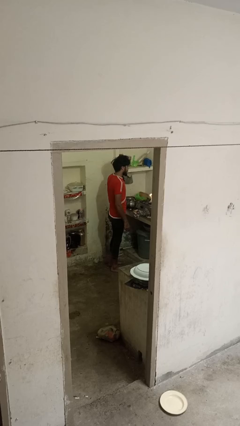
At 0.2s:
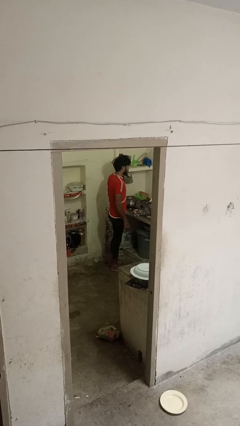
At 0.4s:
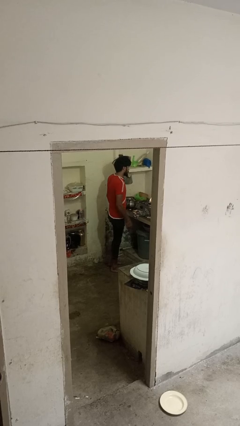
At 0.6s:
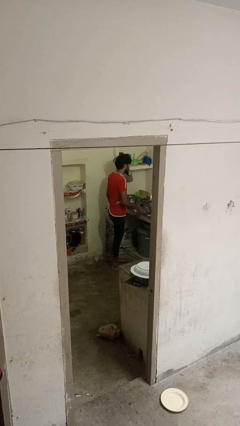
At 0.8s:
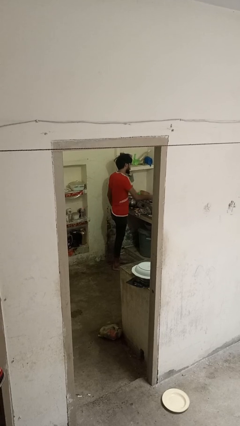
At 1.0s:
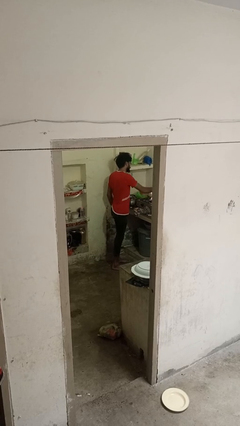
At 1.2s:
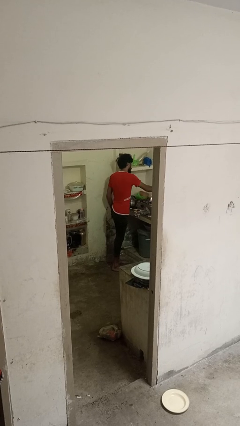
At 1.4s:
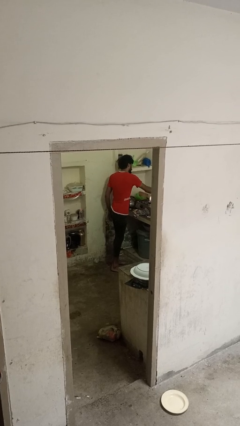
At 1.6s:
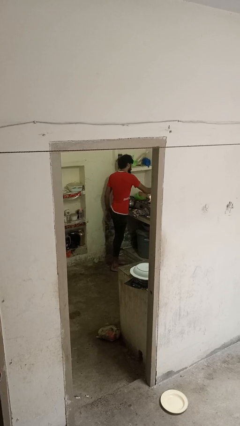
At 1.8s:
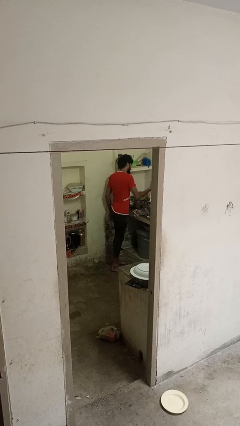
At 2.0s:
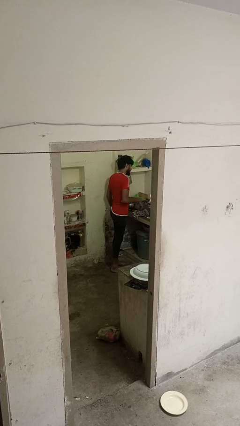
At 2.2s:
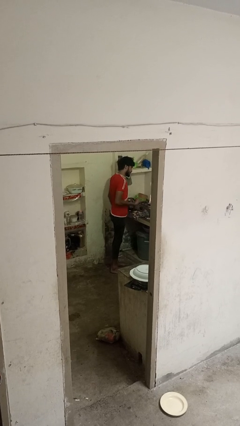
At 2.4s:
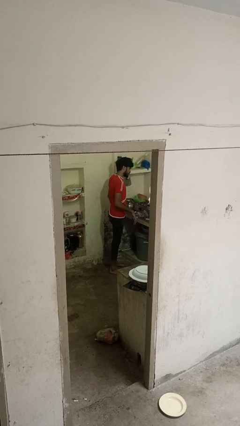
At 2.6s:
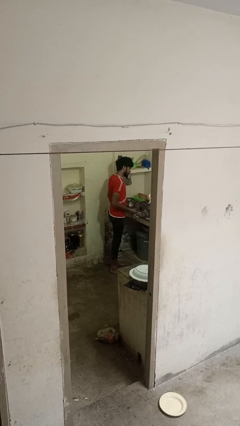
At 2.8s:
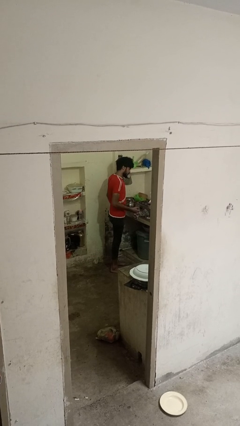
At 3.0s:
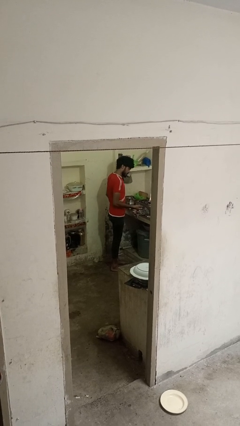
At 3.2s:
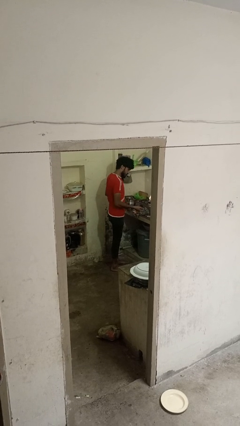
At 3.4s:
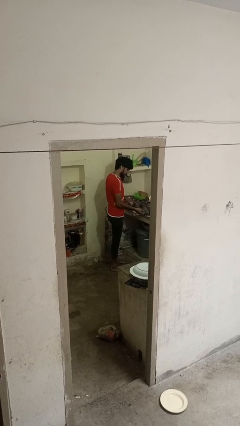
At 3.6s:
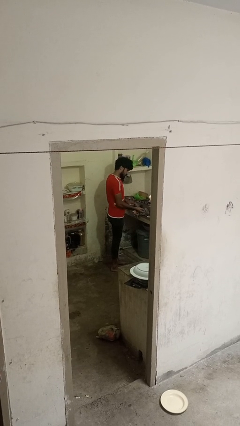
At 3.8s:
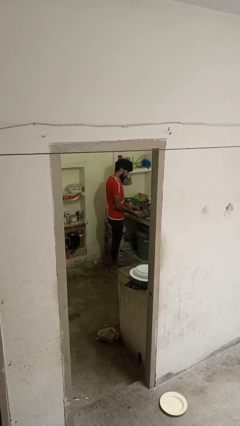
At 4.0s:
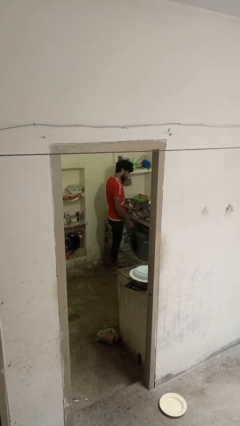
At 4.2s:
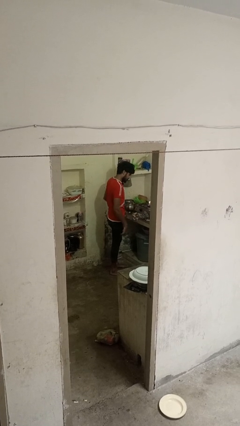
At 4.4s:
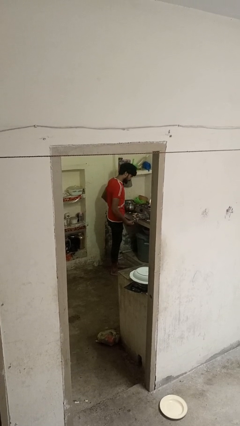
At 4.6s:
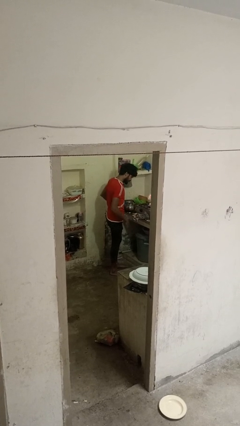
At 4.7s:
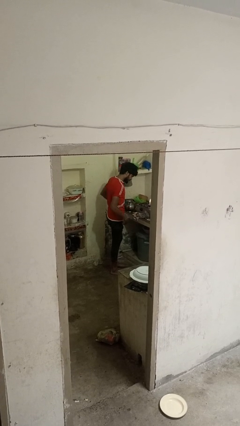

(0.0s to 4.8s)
person burns hand

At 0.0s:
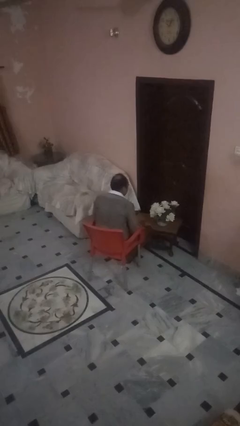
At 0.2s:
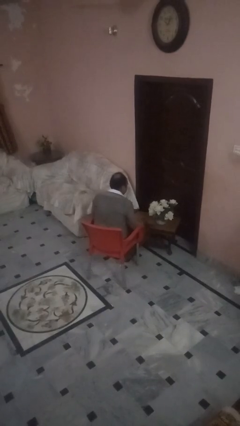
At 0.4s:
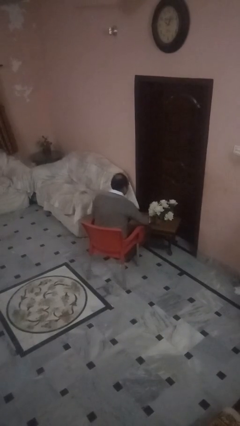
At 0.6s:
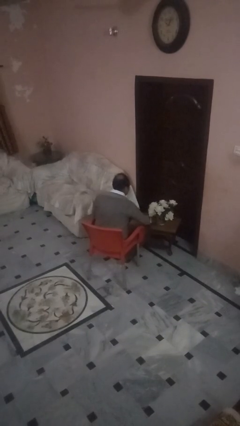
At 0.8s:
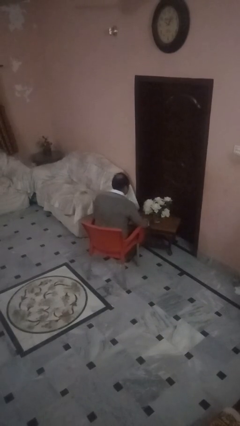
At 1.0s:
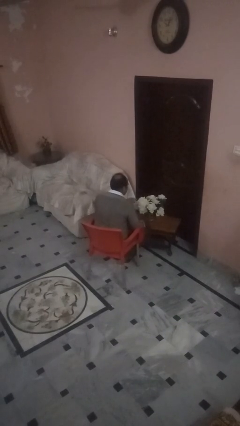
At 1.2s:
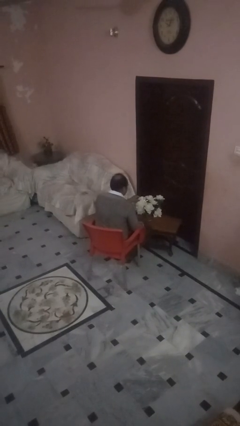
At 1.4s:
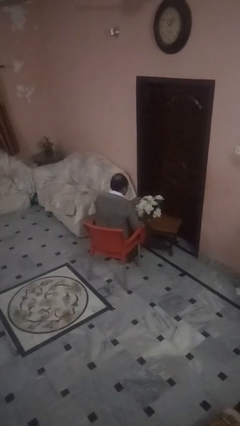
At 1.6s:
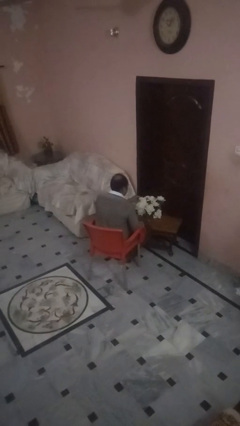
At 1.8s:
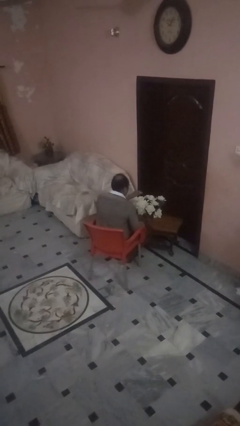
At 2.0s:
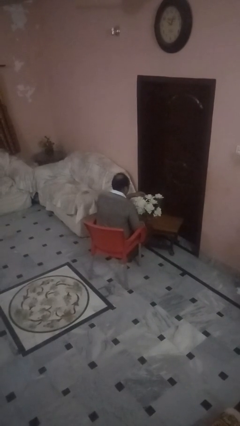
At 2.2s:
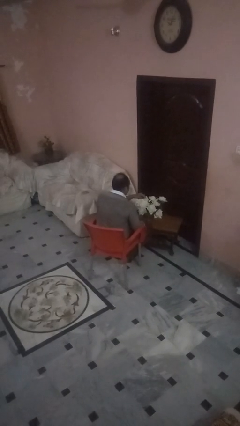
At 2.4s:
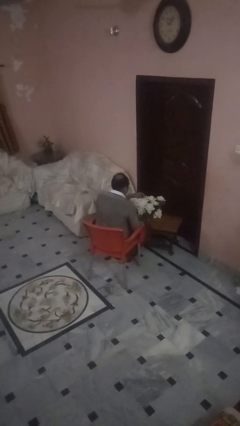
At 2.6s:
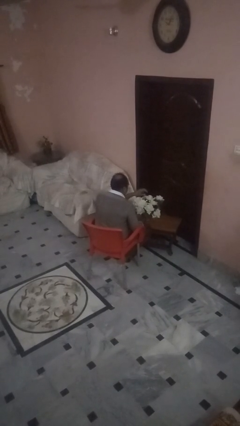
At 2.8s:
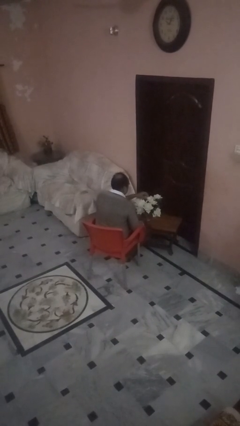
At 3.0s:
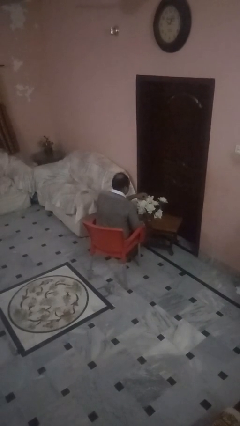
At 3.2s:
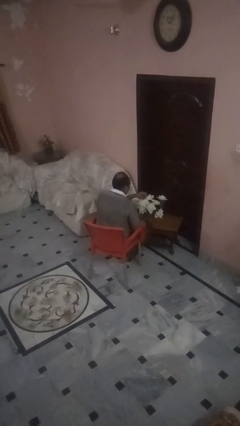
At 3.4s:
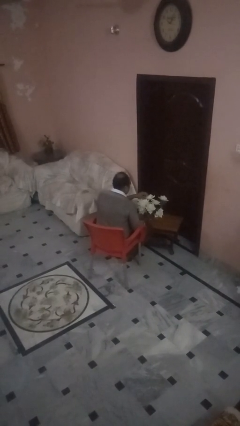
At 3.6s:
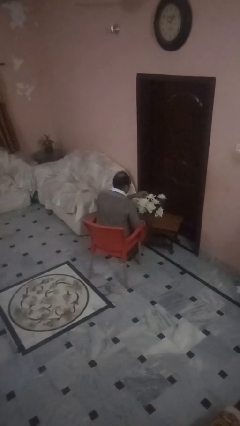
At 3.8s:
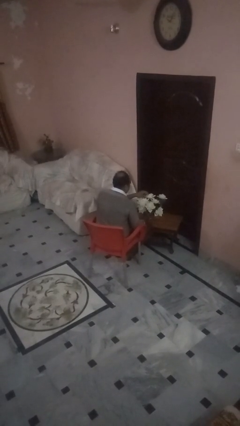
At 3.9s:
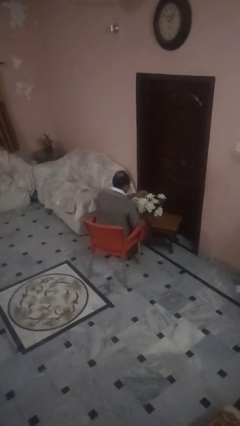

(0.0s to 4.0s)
person arranges flowers in vase

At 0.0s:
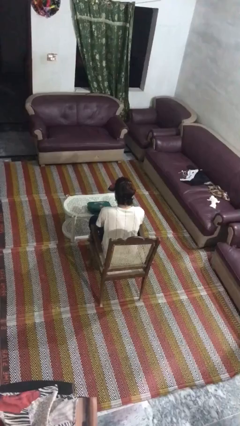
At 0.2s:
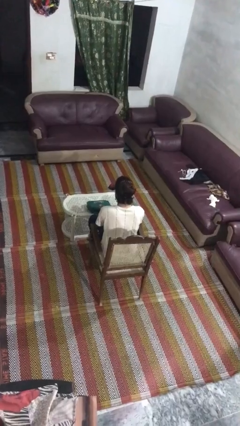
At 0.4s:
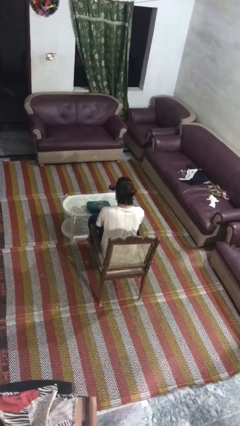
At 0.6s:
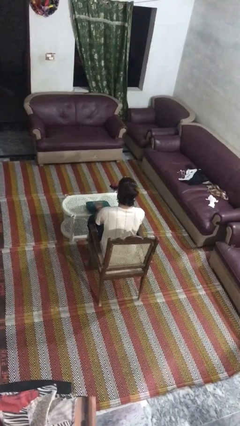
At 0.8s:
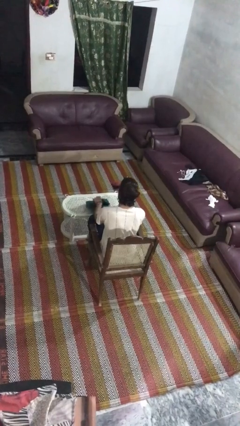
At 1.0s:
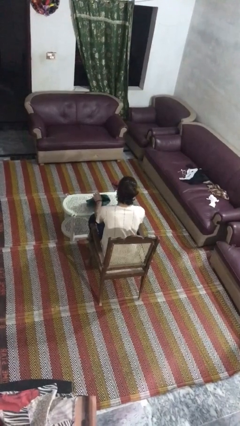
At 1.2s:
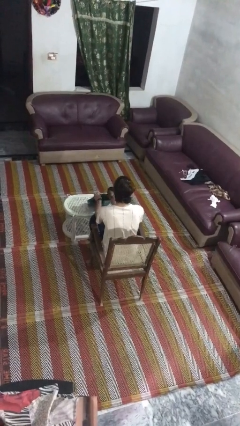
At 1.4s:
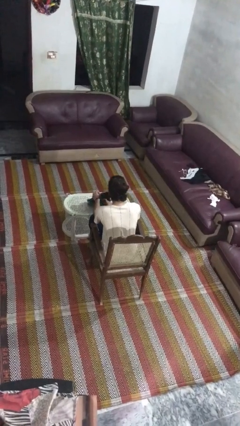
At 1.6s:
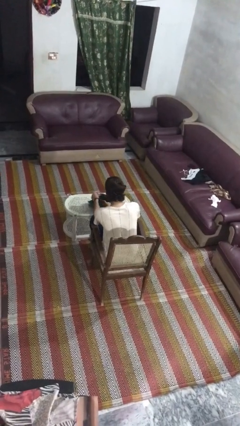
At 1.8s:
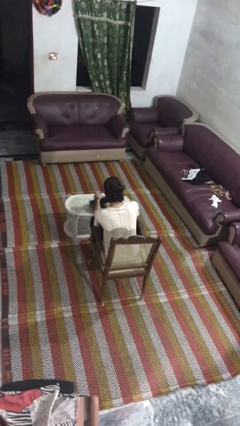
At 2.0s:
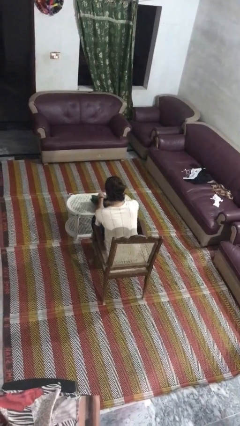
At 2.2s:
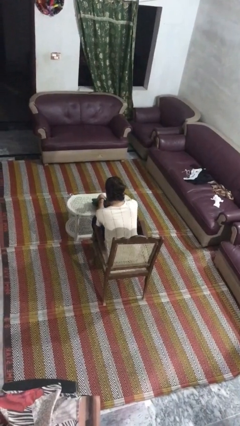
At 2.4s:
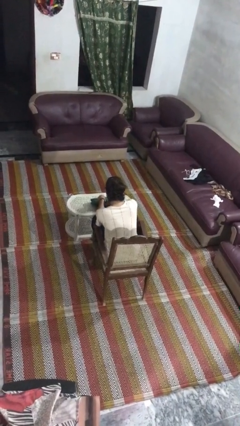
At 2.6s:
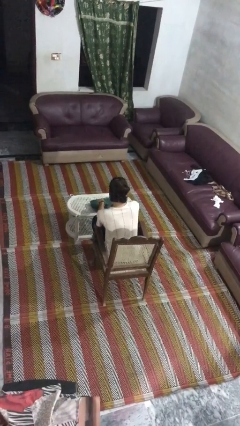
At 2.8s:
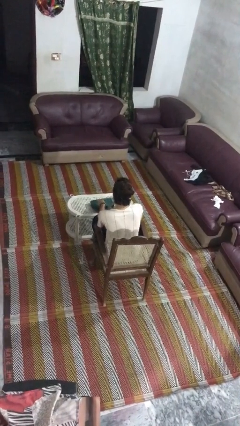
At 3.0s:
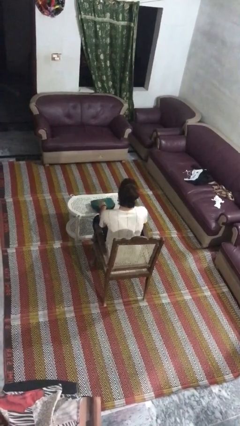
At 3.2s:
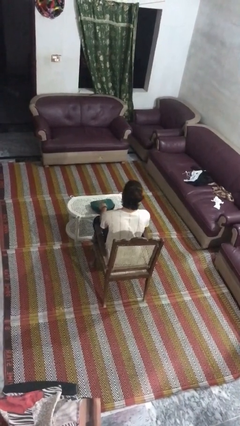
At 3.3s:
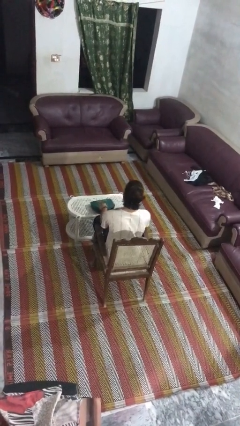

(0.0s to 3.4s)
person puts object into purse

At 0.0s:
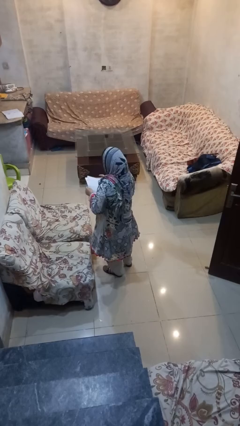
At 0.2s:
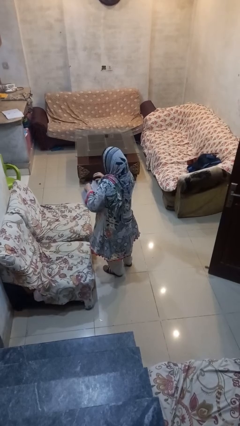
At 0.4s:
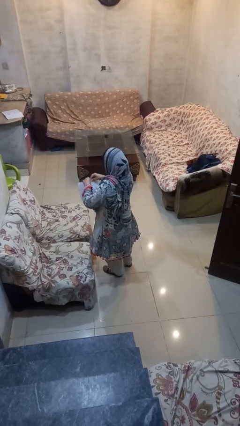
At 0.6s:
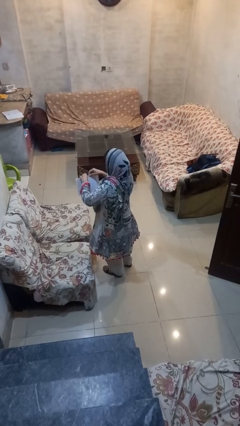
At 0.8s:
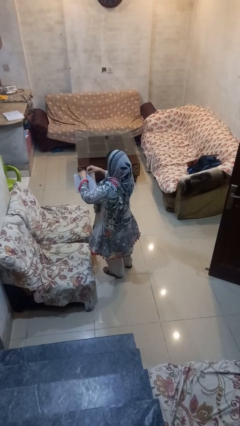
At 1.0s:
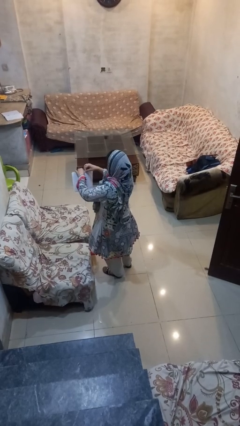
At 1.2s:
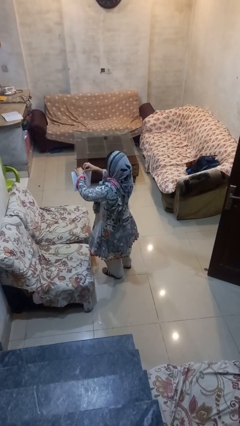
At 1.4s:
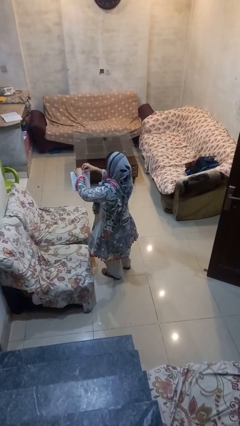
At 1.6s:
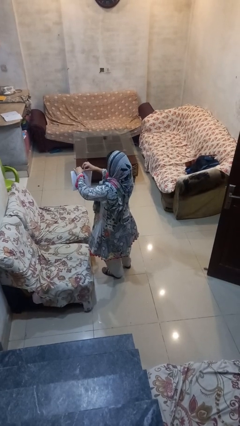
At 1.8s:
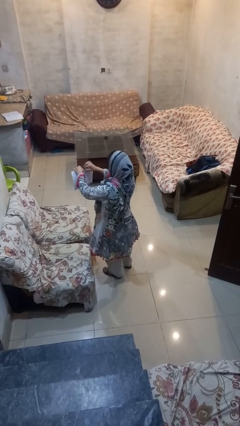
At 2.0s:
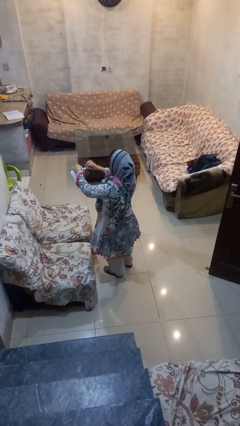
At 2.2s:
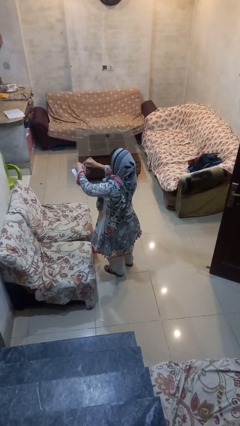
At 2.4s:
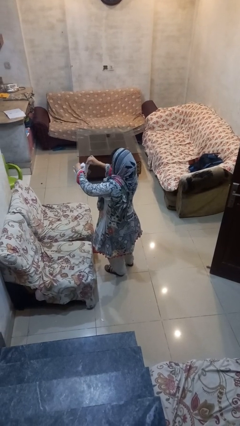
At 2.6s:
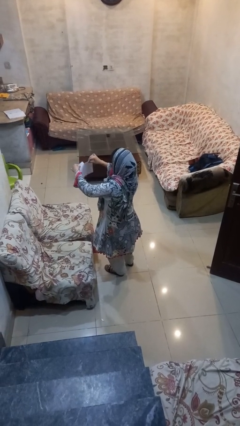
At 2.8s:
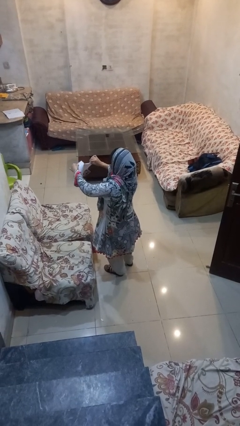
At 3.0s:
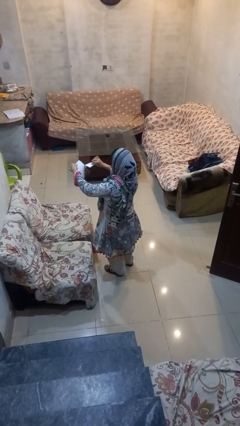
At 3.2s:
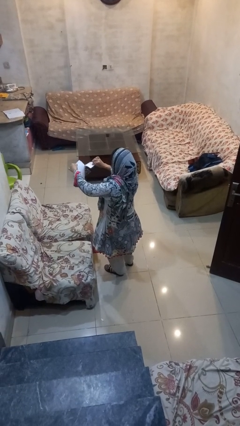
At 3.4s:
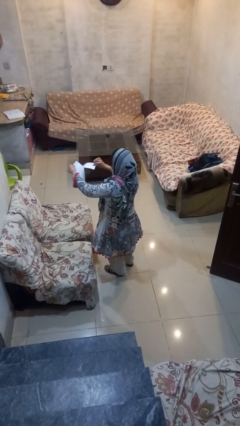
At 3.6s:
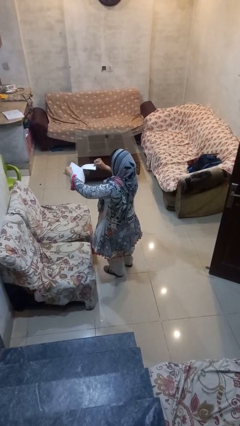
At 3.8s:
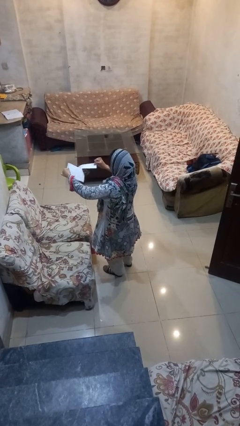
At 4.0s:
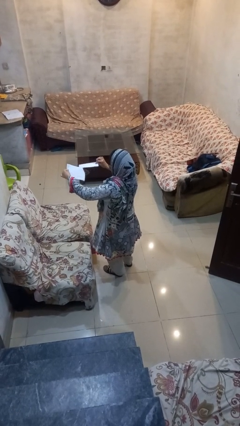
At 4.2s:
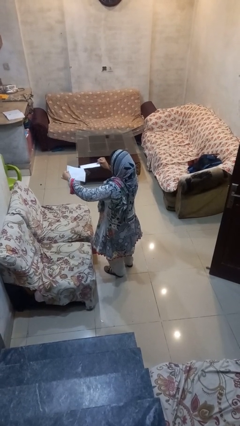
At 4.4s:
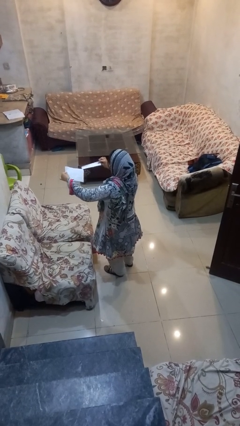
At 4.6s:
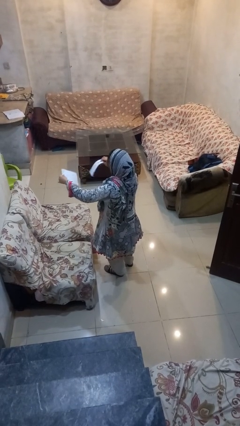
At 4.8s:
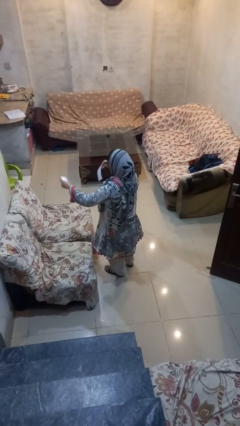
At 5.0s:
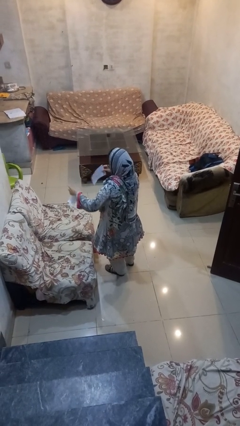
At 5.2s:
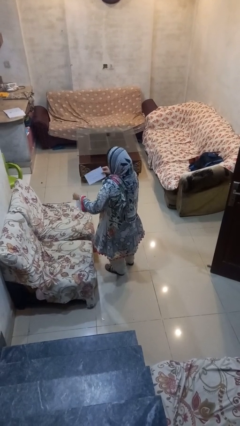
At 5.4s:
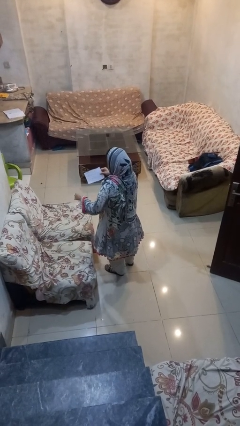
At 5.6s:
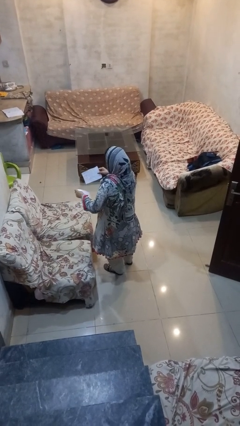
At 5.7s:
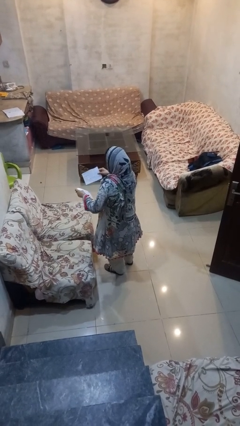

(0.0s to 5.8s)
person tears paper
